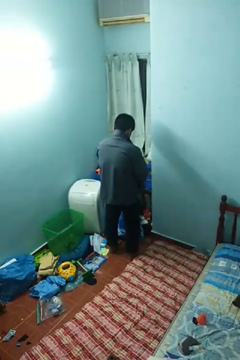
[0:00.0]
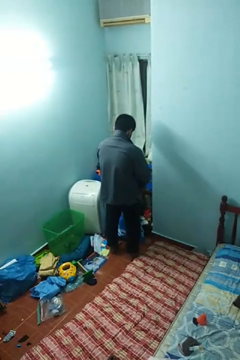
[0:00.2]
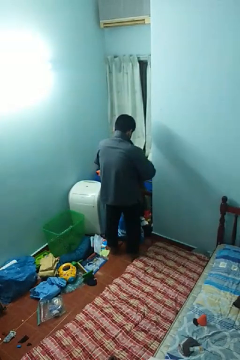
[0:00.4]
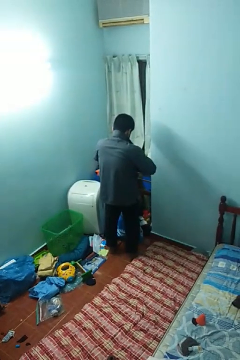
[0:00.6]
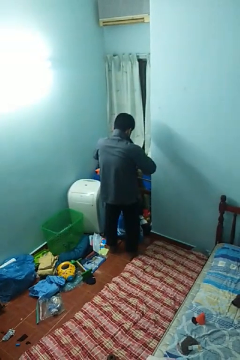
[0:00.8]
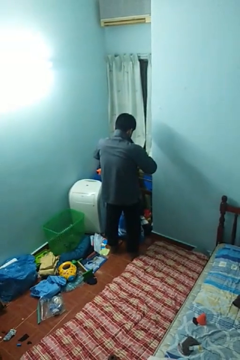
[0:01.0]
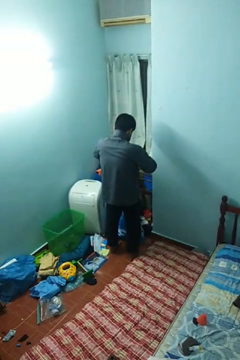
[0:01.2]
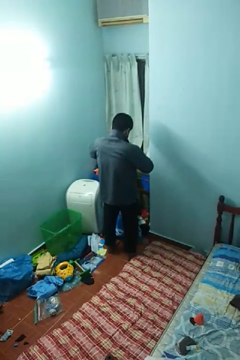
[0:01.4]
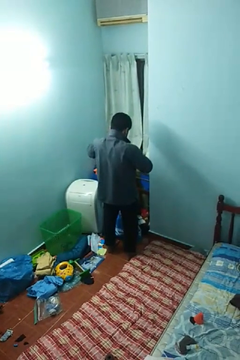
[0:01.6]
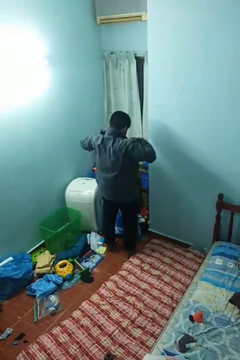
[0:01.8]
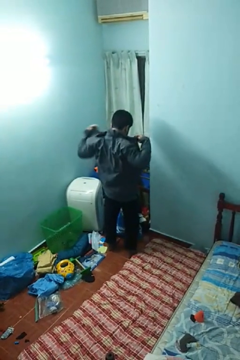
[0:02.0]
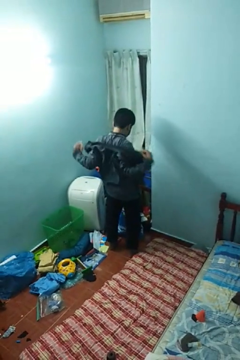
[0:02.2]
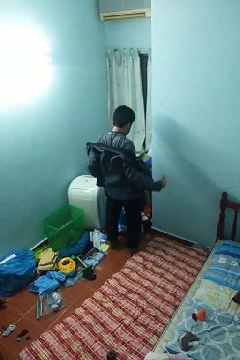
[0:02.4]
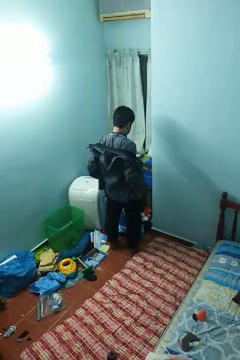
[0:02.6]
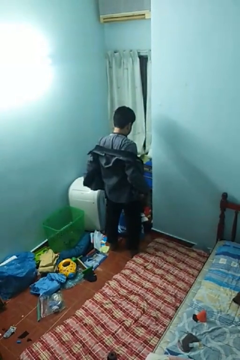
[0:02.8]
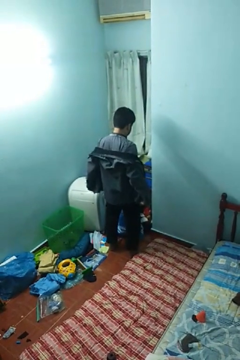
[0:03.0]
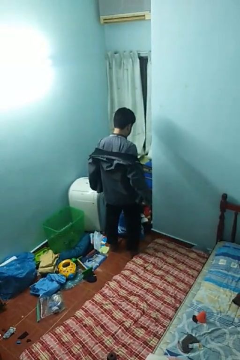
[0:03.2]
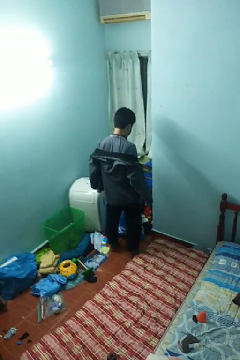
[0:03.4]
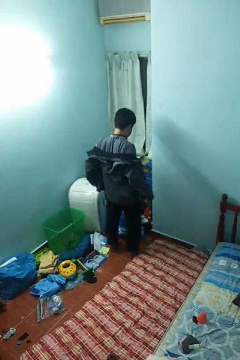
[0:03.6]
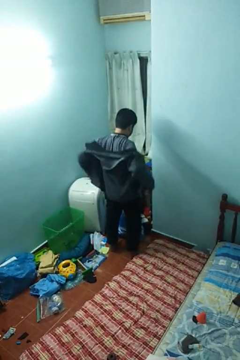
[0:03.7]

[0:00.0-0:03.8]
person unbuttons shirt

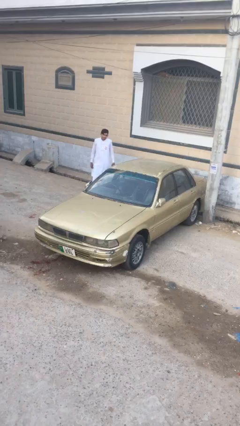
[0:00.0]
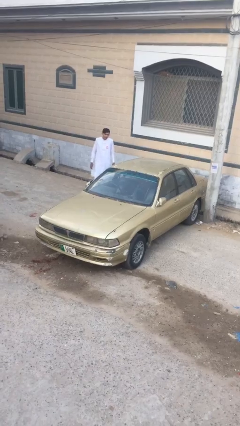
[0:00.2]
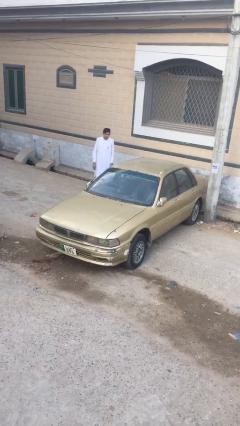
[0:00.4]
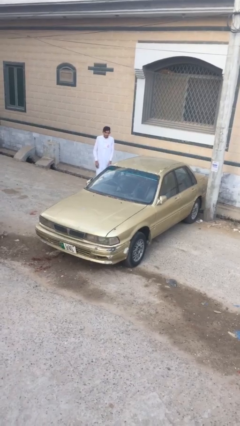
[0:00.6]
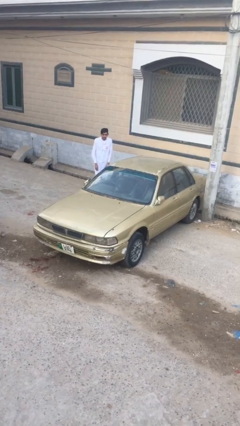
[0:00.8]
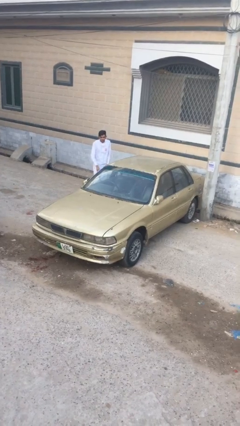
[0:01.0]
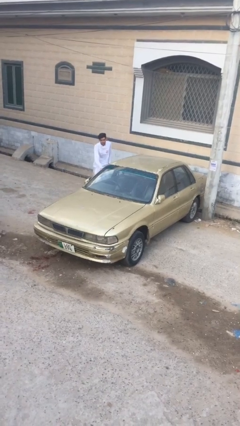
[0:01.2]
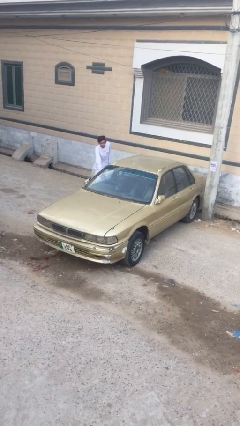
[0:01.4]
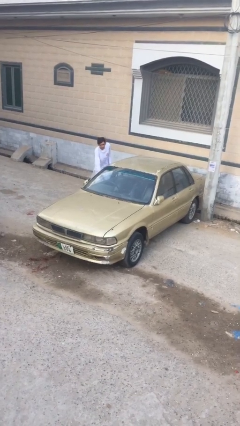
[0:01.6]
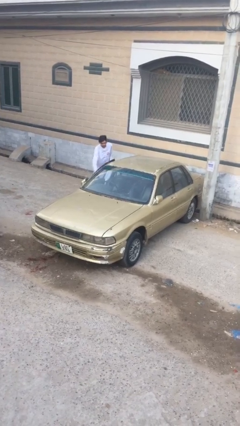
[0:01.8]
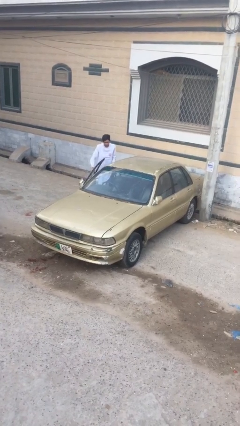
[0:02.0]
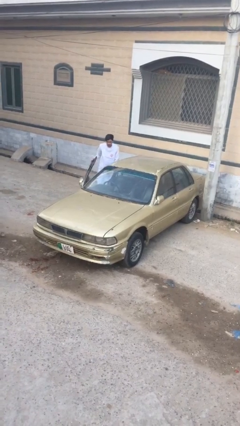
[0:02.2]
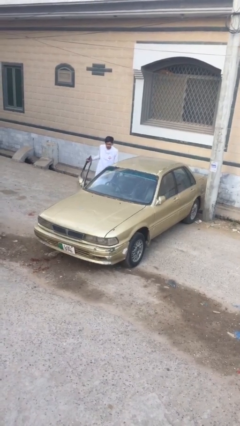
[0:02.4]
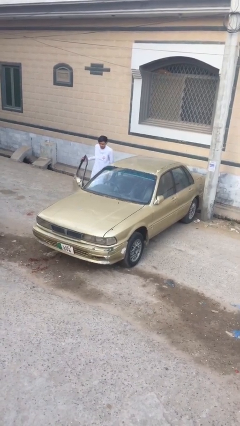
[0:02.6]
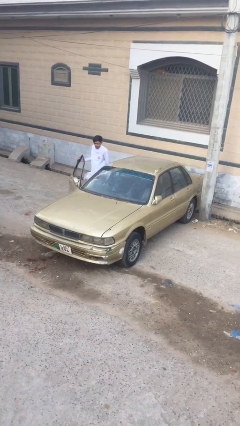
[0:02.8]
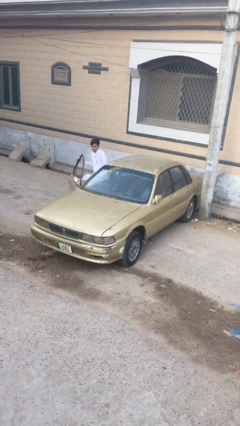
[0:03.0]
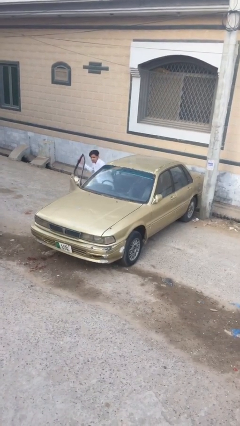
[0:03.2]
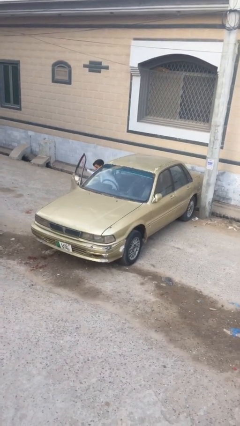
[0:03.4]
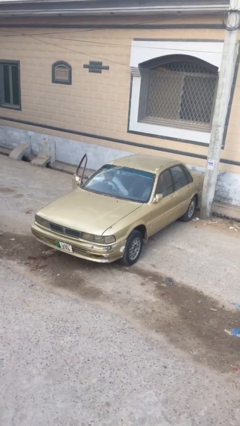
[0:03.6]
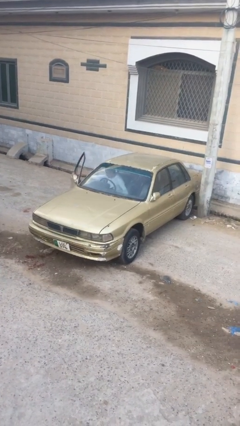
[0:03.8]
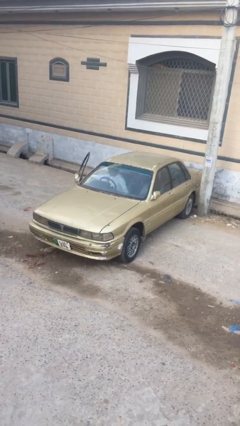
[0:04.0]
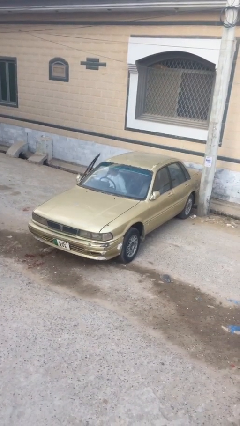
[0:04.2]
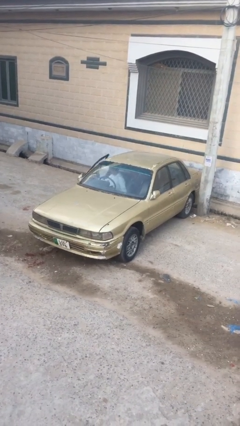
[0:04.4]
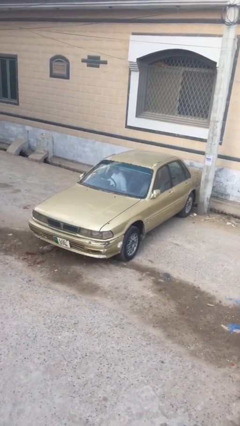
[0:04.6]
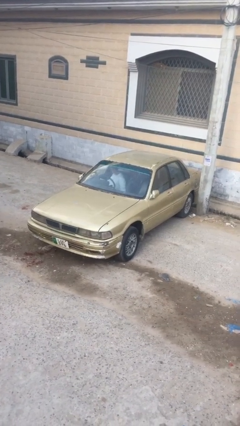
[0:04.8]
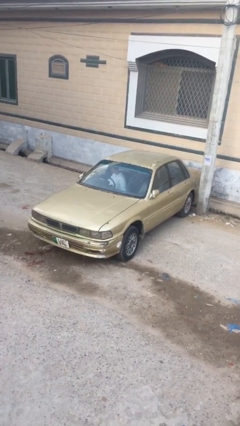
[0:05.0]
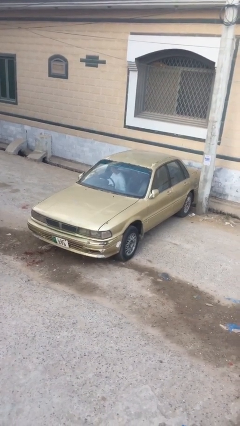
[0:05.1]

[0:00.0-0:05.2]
car picks up person

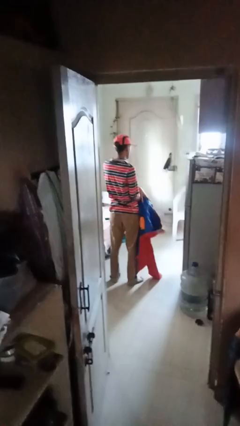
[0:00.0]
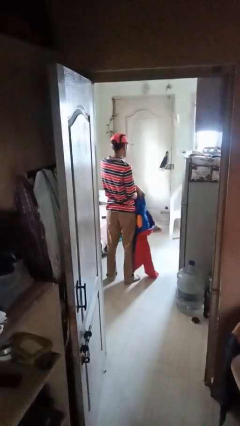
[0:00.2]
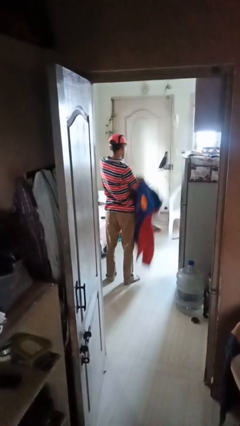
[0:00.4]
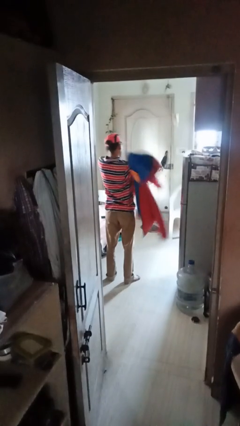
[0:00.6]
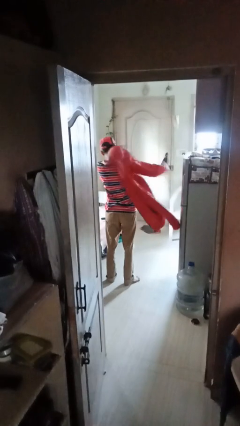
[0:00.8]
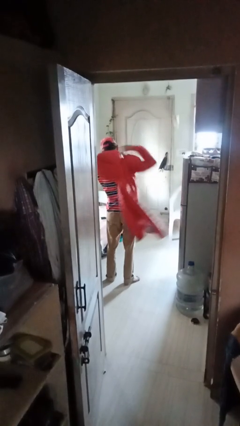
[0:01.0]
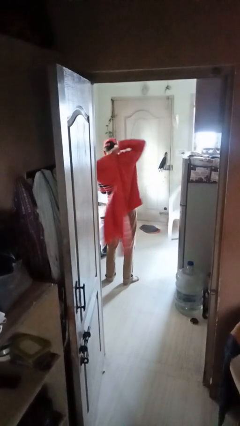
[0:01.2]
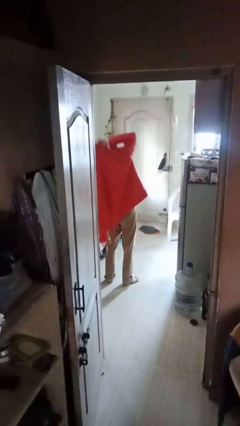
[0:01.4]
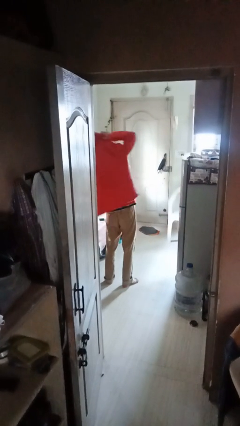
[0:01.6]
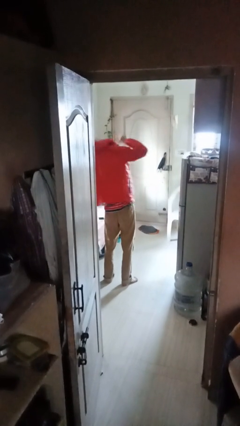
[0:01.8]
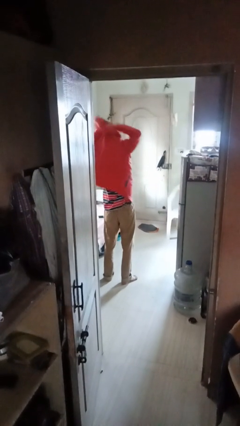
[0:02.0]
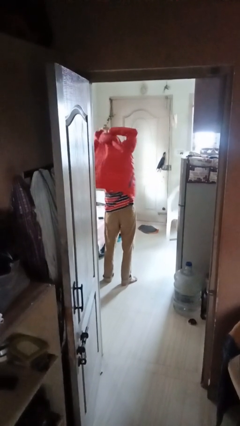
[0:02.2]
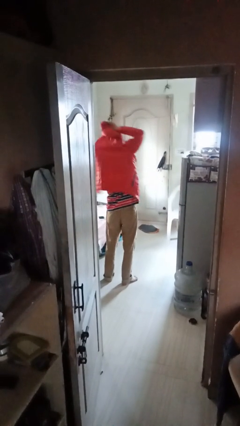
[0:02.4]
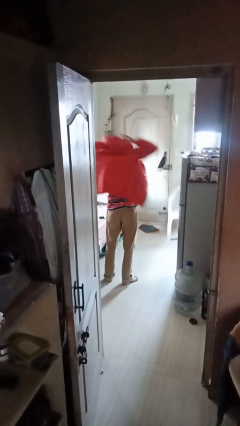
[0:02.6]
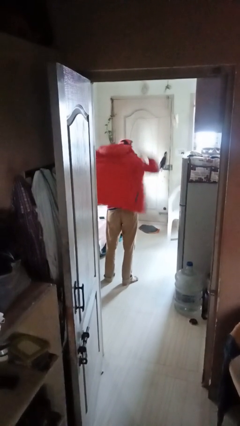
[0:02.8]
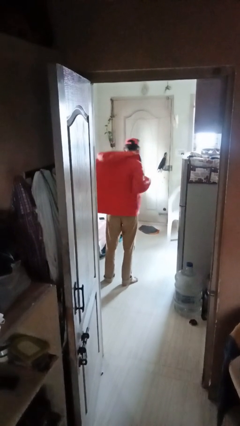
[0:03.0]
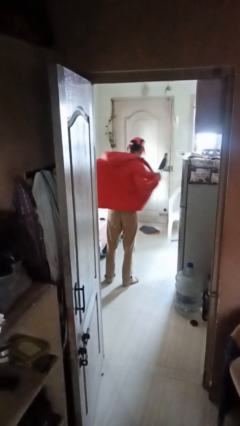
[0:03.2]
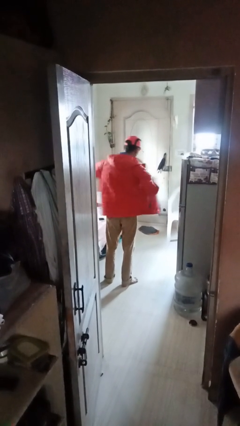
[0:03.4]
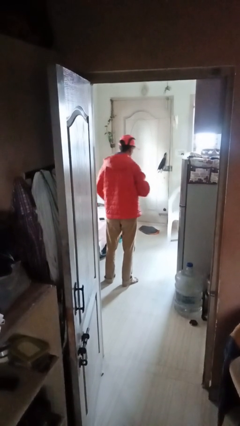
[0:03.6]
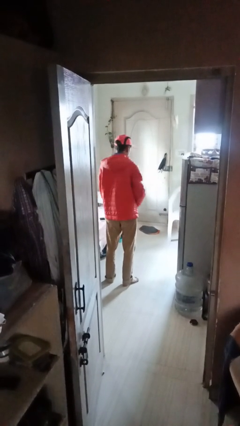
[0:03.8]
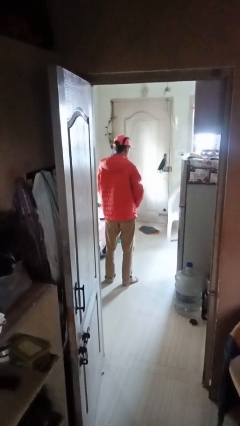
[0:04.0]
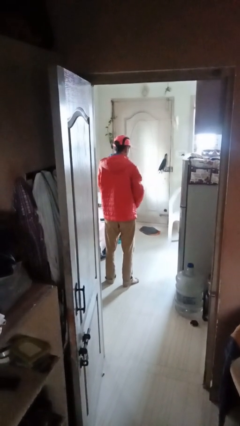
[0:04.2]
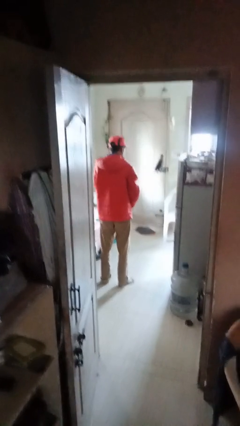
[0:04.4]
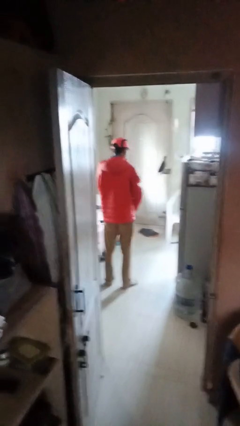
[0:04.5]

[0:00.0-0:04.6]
person puts on jacket

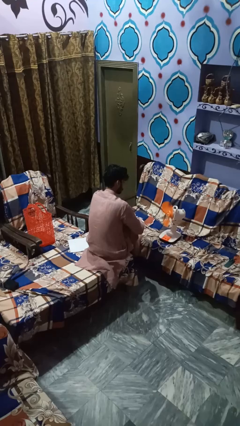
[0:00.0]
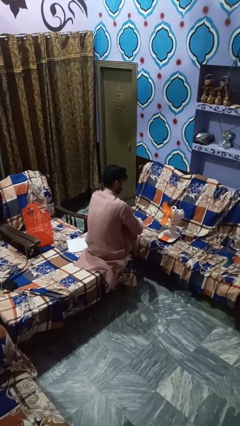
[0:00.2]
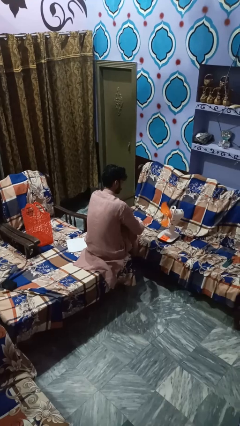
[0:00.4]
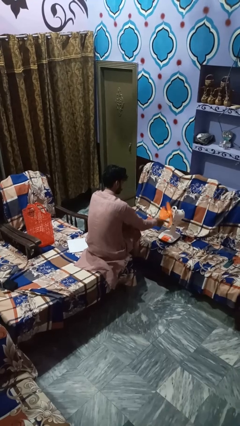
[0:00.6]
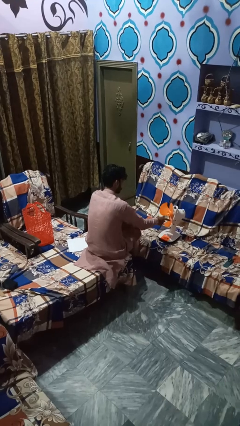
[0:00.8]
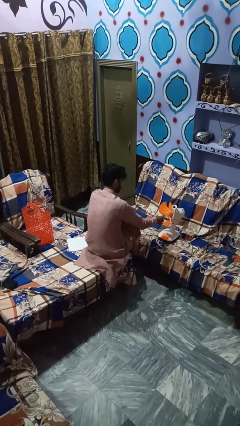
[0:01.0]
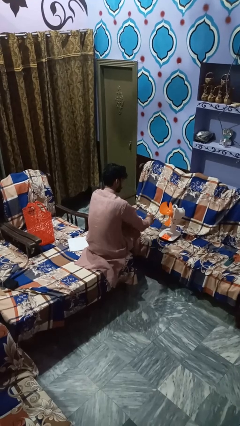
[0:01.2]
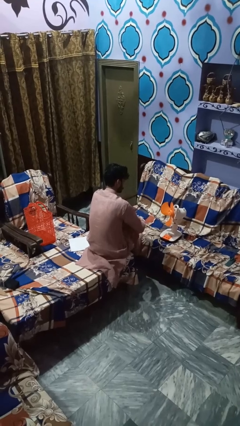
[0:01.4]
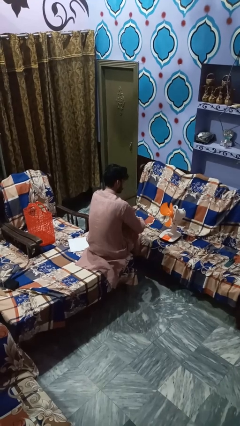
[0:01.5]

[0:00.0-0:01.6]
person turns off fan

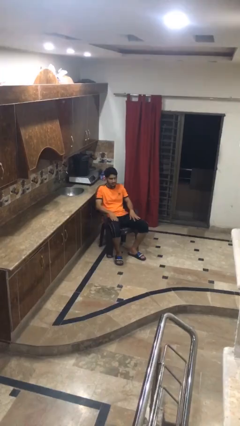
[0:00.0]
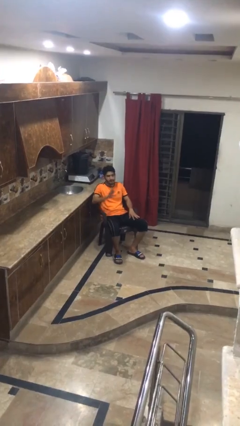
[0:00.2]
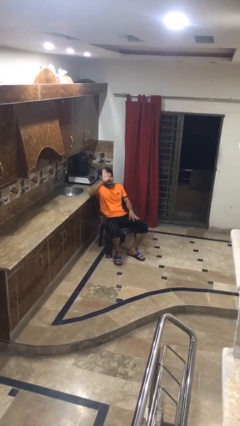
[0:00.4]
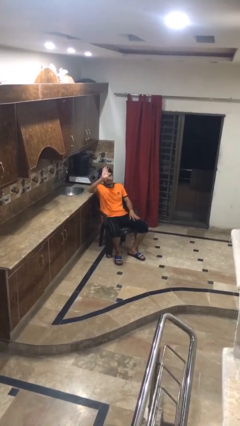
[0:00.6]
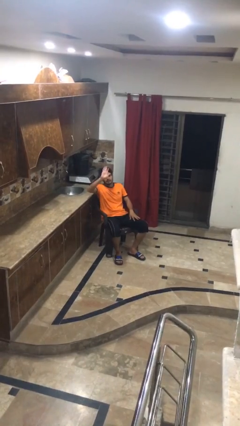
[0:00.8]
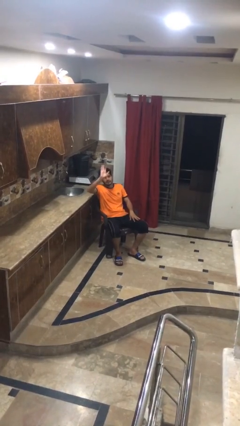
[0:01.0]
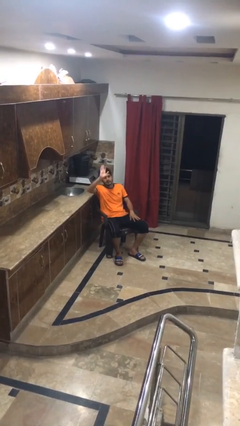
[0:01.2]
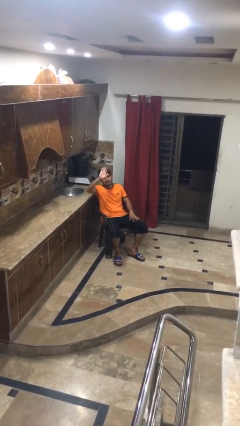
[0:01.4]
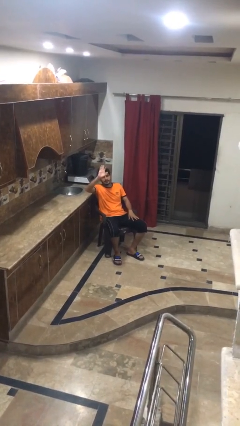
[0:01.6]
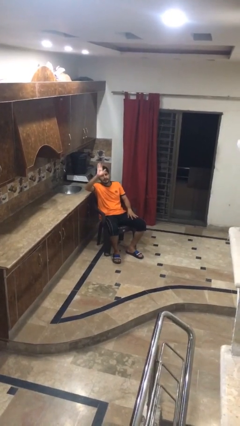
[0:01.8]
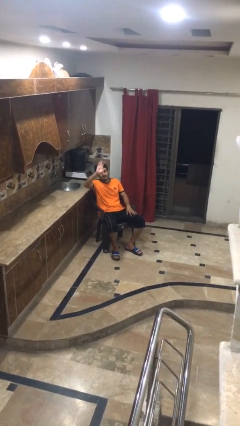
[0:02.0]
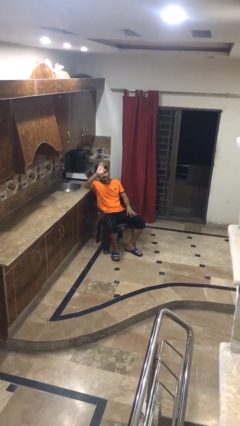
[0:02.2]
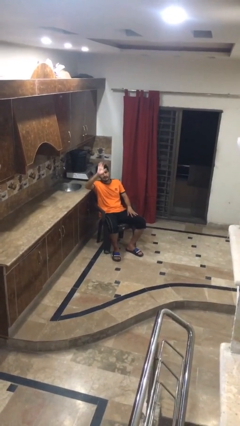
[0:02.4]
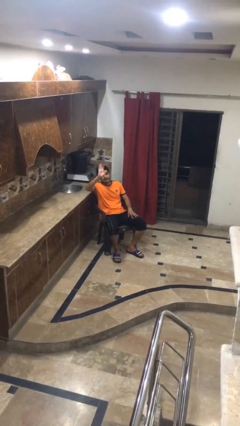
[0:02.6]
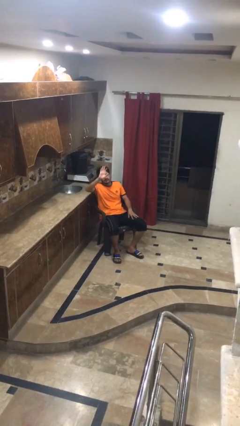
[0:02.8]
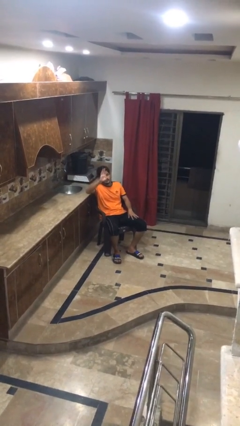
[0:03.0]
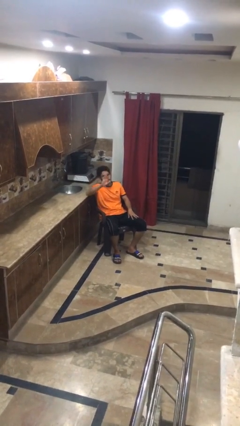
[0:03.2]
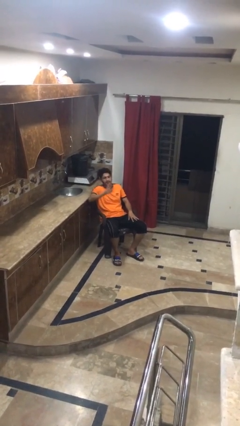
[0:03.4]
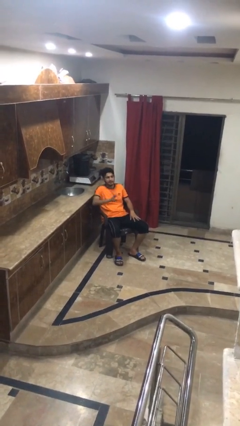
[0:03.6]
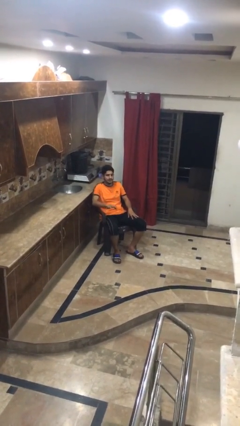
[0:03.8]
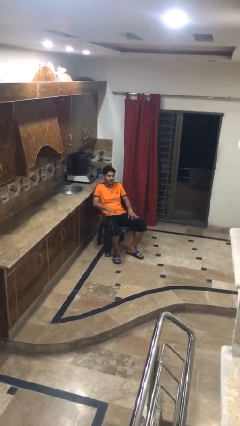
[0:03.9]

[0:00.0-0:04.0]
person waves at person
